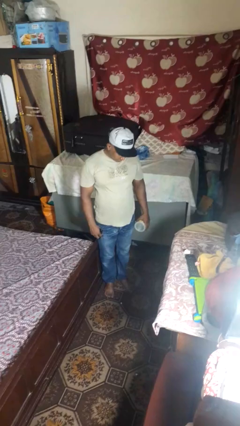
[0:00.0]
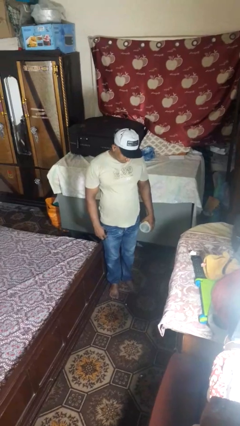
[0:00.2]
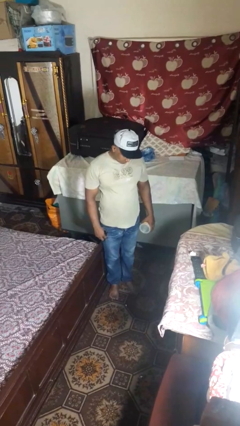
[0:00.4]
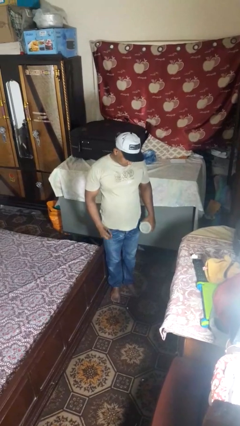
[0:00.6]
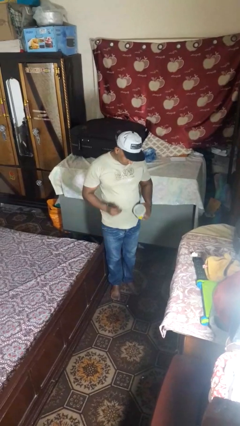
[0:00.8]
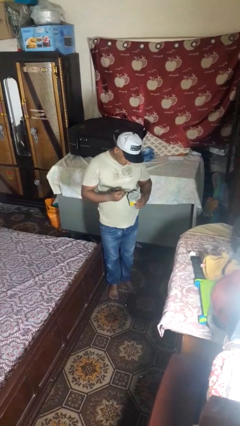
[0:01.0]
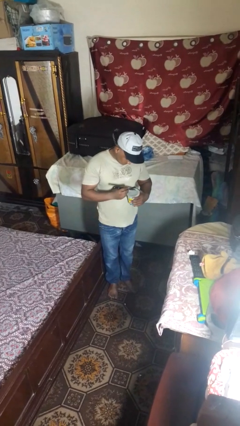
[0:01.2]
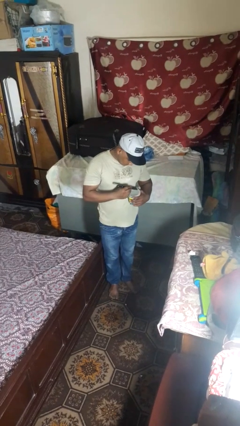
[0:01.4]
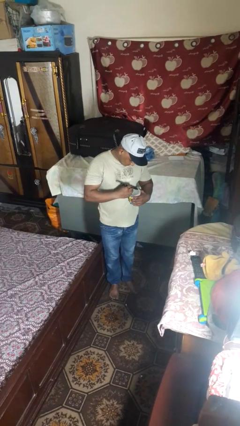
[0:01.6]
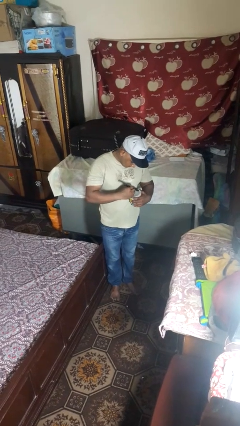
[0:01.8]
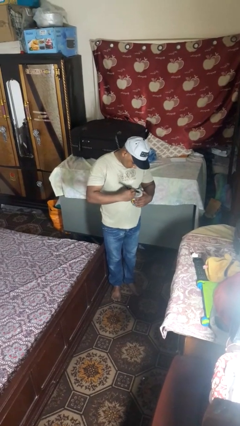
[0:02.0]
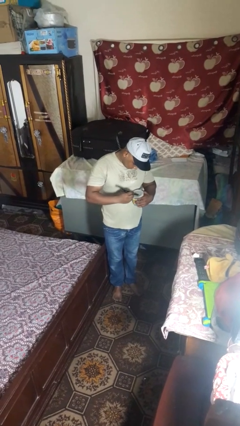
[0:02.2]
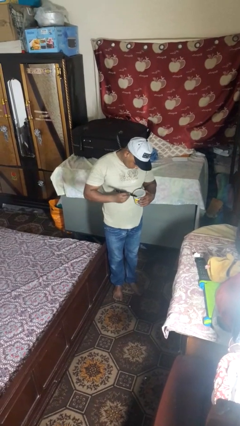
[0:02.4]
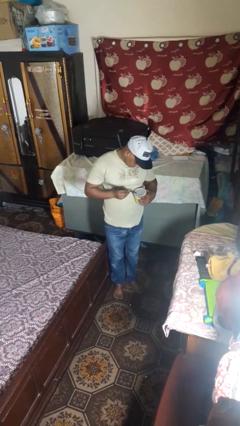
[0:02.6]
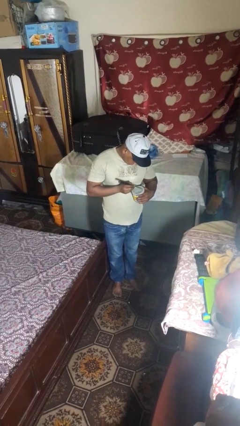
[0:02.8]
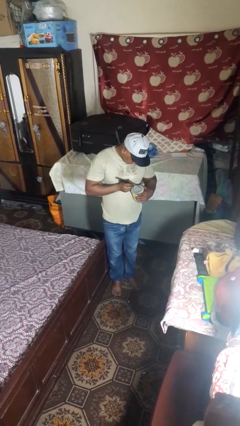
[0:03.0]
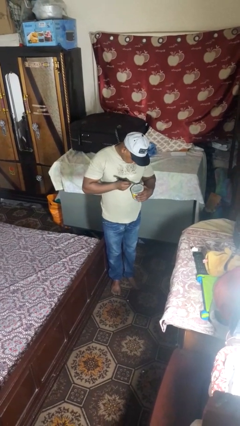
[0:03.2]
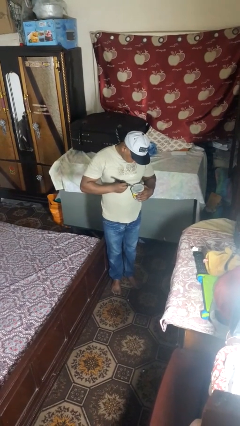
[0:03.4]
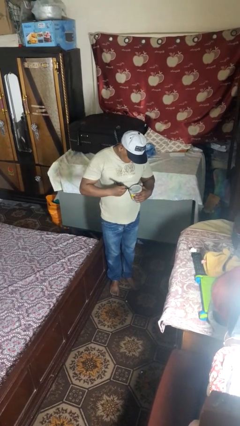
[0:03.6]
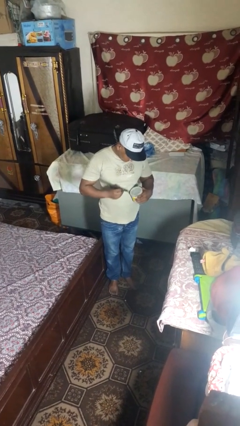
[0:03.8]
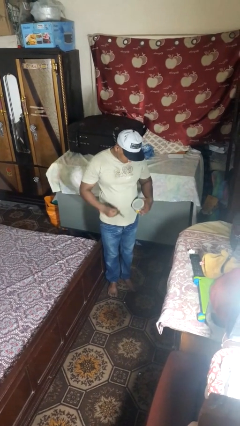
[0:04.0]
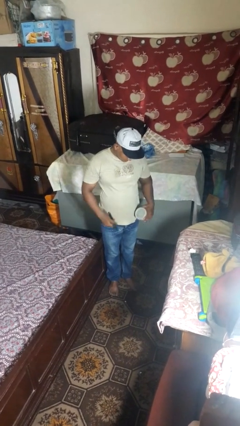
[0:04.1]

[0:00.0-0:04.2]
person opens can with can opener

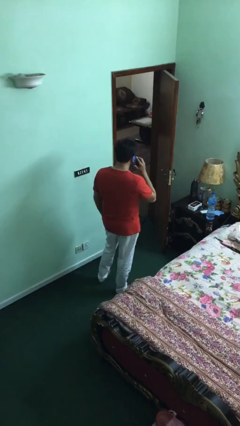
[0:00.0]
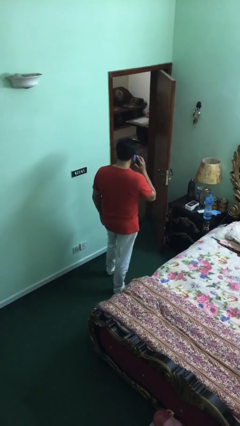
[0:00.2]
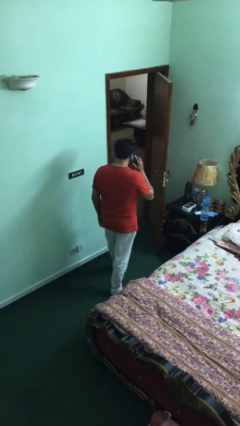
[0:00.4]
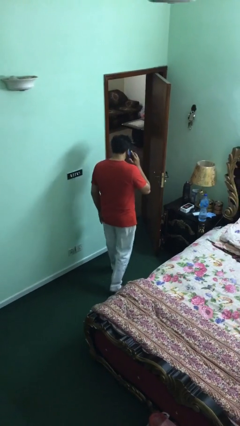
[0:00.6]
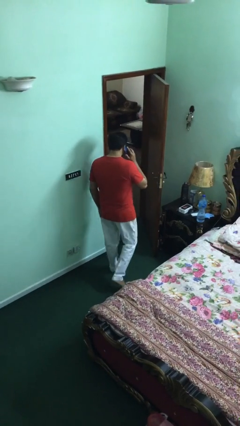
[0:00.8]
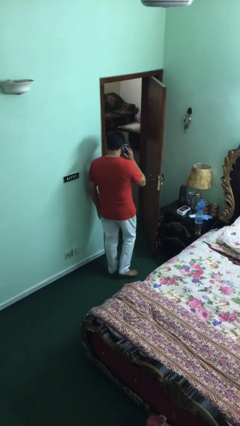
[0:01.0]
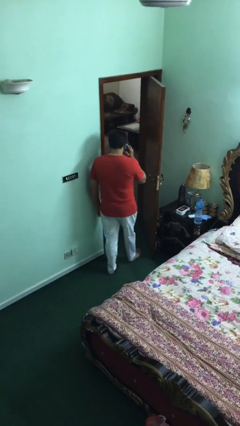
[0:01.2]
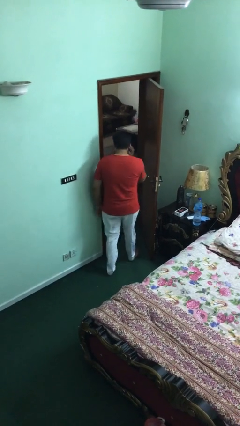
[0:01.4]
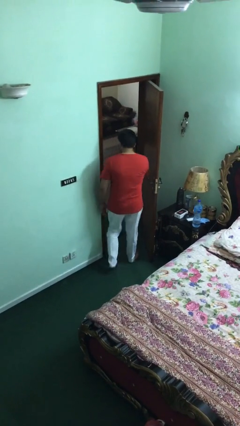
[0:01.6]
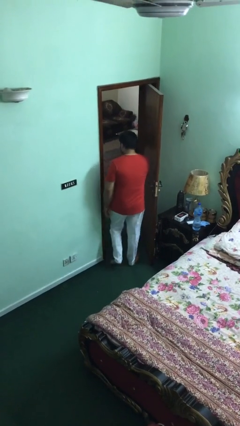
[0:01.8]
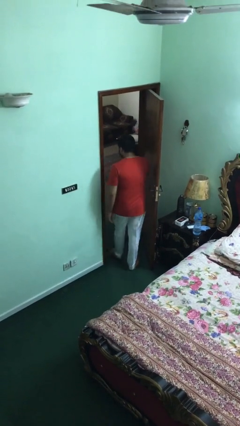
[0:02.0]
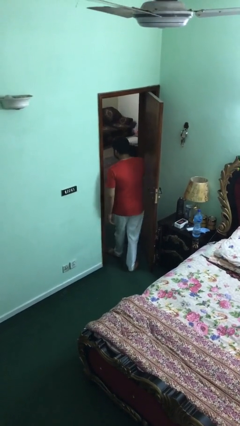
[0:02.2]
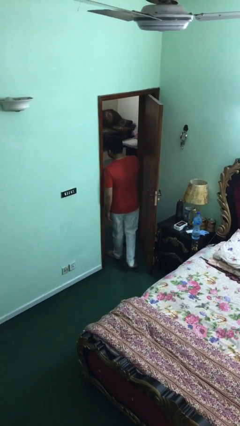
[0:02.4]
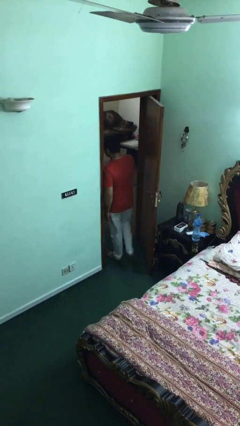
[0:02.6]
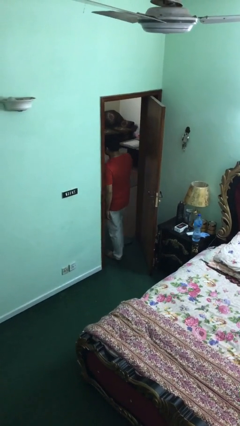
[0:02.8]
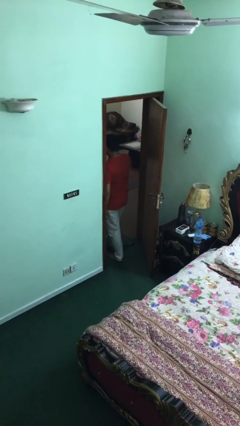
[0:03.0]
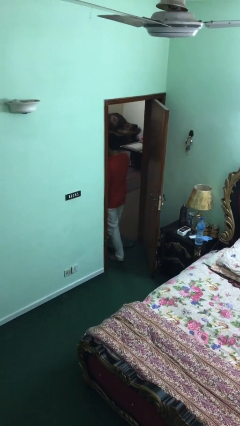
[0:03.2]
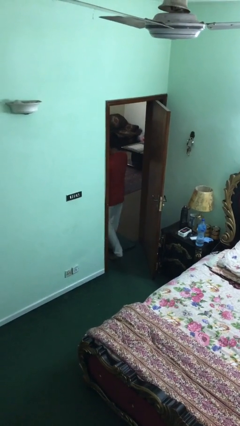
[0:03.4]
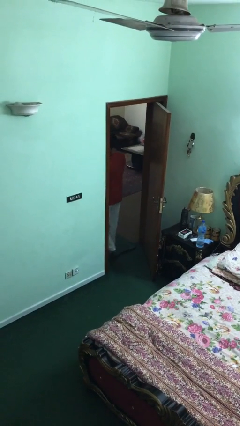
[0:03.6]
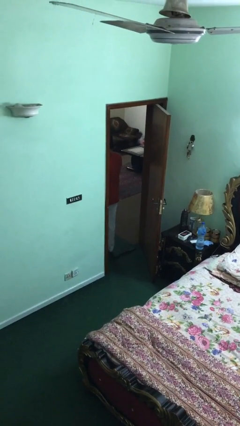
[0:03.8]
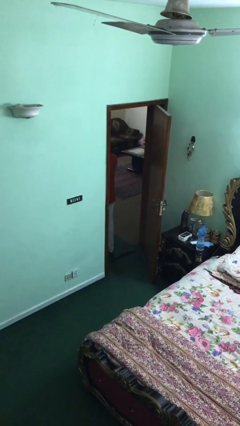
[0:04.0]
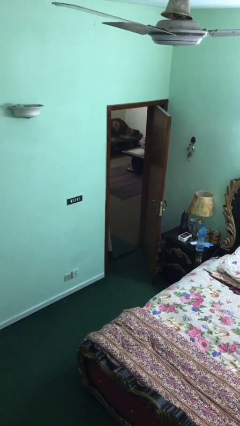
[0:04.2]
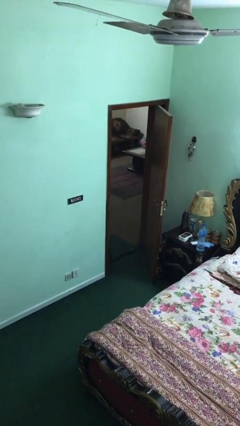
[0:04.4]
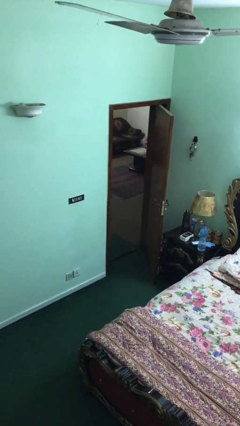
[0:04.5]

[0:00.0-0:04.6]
person exits scene through structure

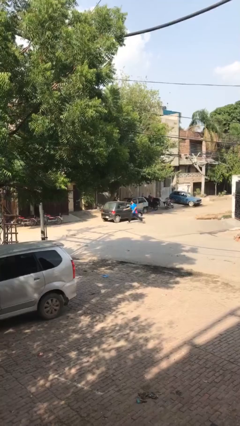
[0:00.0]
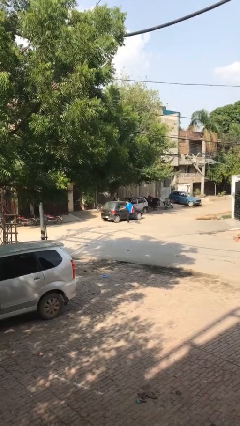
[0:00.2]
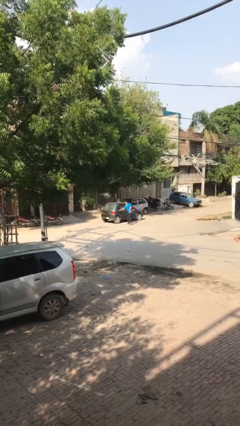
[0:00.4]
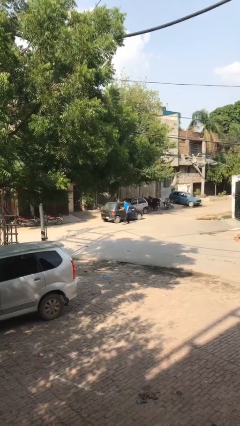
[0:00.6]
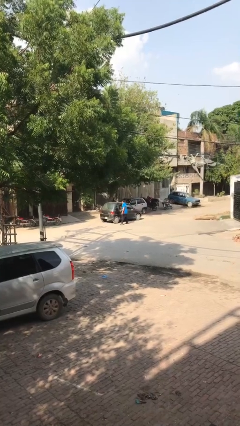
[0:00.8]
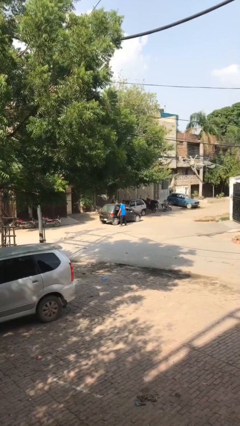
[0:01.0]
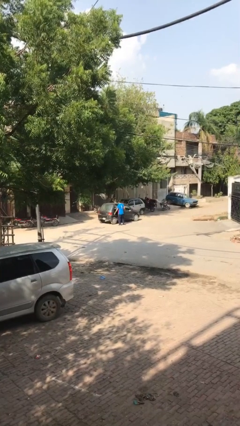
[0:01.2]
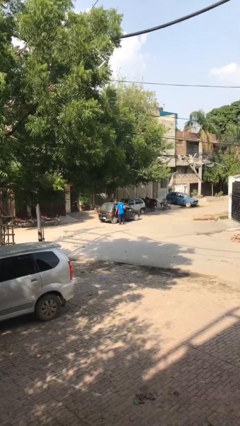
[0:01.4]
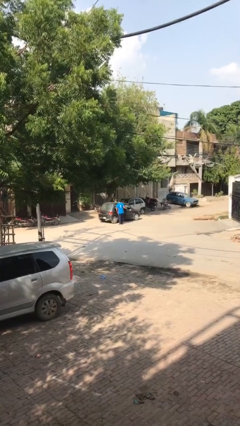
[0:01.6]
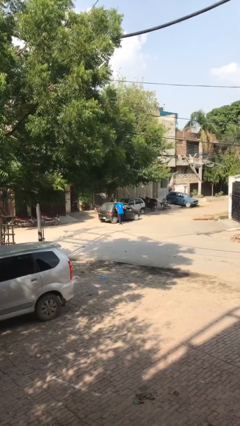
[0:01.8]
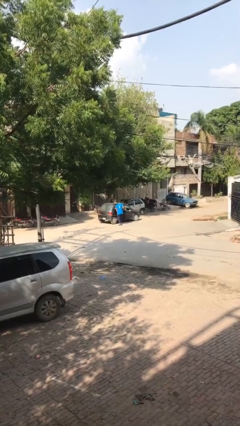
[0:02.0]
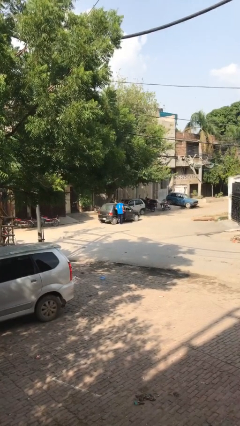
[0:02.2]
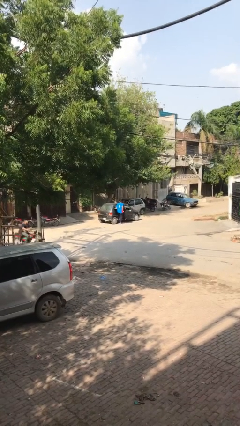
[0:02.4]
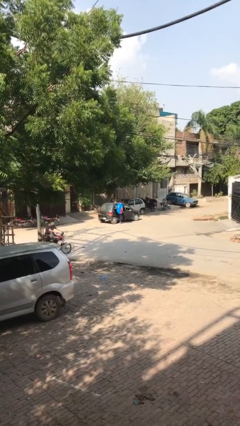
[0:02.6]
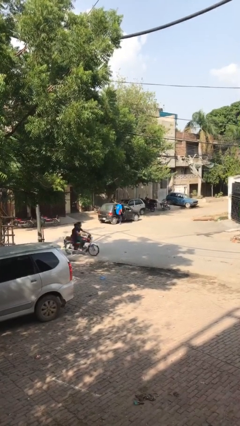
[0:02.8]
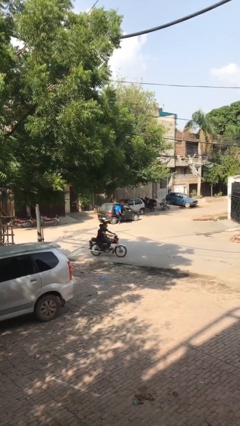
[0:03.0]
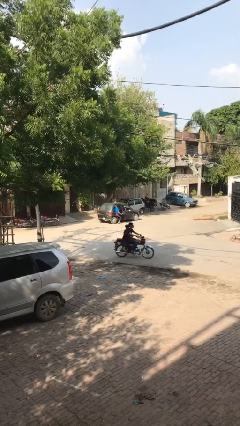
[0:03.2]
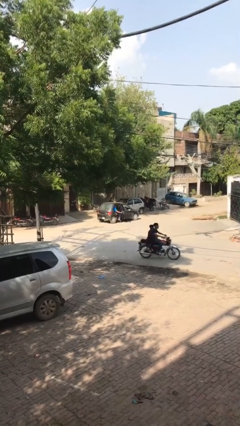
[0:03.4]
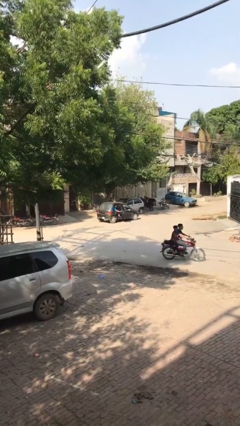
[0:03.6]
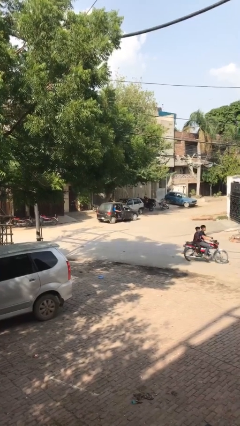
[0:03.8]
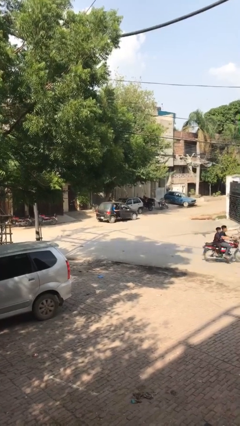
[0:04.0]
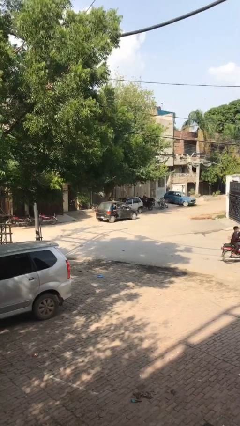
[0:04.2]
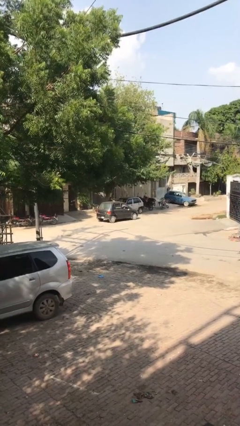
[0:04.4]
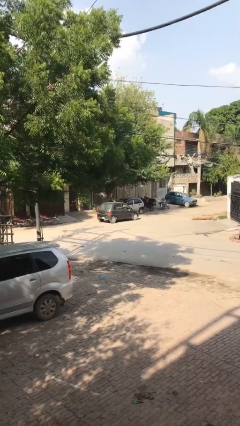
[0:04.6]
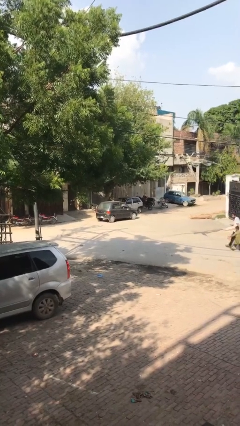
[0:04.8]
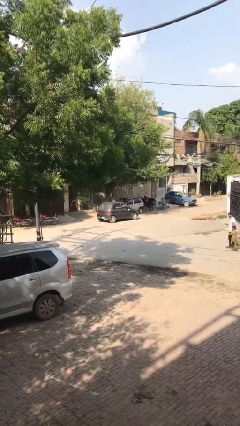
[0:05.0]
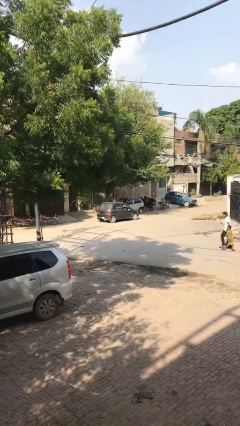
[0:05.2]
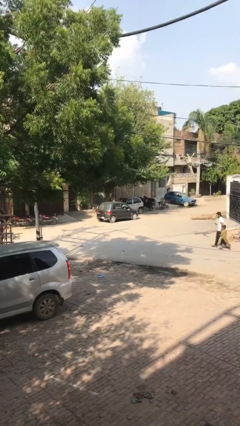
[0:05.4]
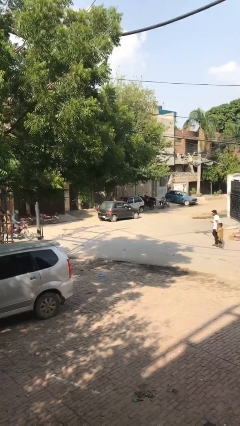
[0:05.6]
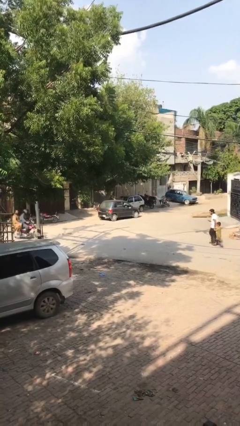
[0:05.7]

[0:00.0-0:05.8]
car picks up person

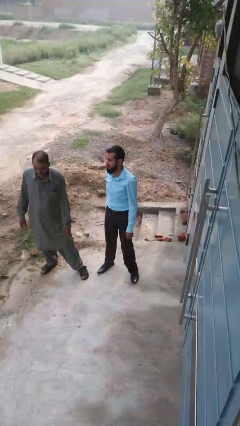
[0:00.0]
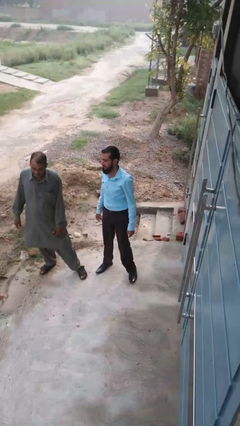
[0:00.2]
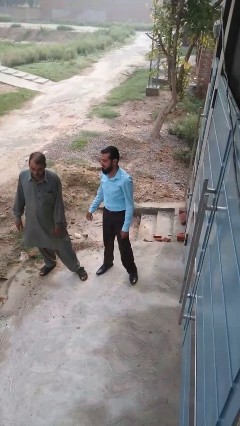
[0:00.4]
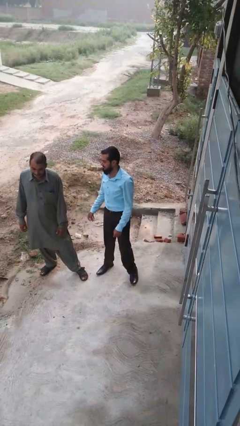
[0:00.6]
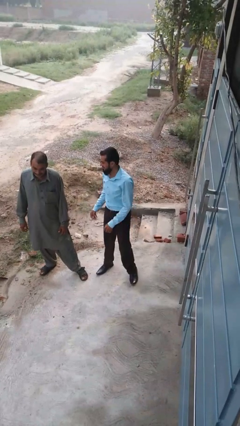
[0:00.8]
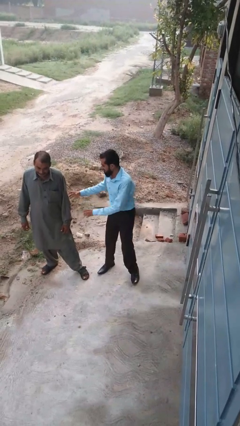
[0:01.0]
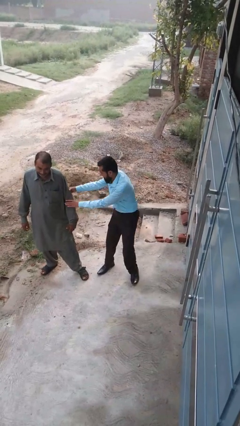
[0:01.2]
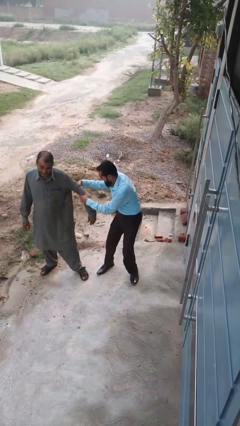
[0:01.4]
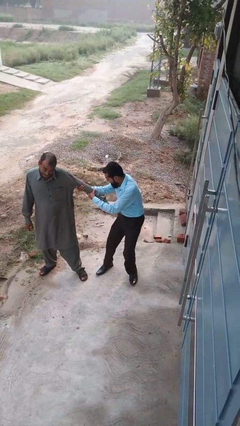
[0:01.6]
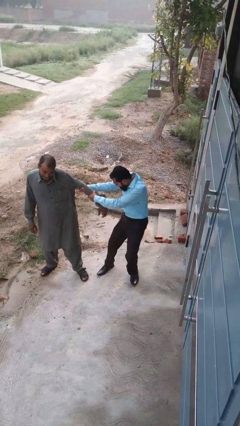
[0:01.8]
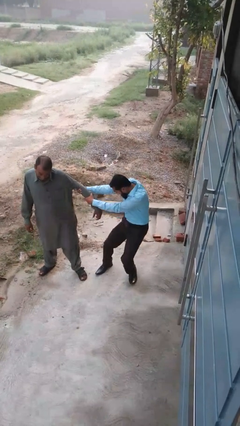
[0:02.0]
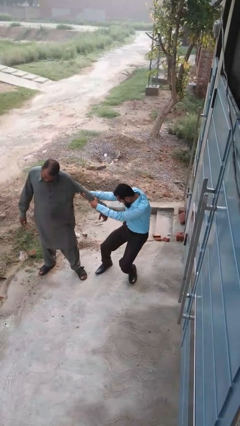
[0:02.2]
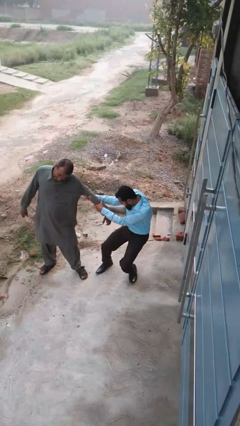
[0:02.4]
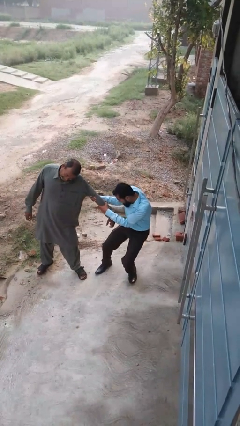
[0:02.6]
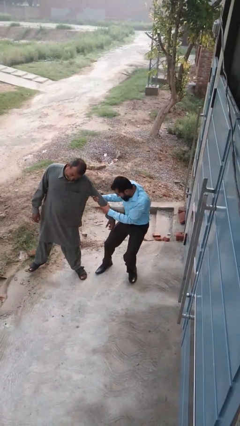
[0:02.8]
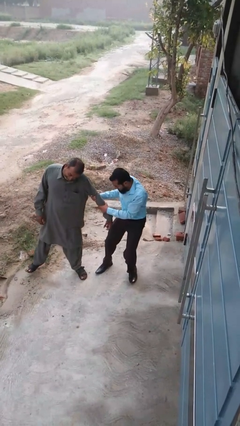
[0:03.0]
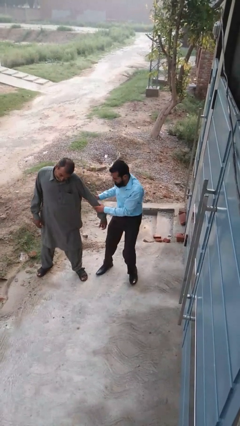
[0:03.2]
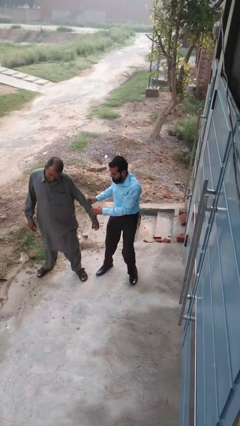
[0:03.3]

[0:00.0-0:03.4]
person grabs person by forearm
